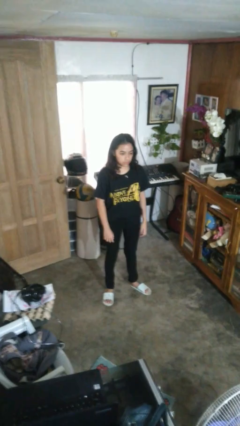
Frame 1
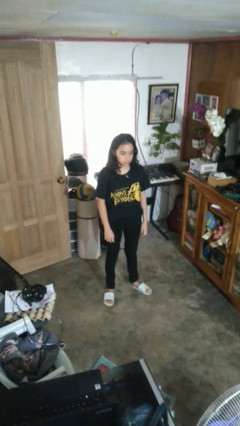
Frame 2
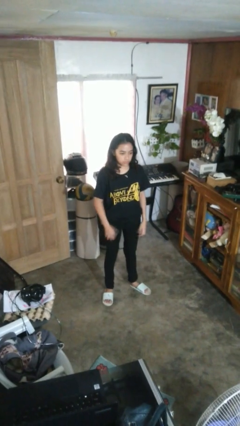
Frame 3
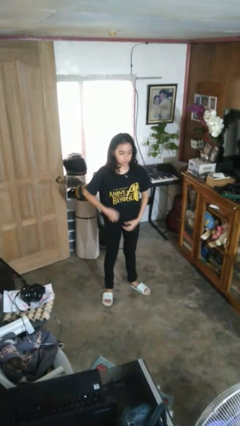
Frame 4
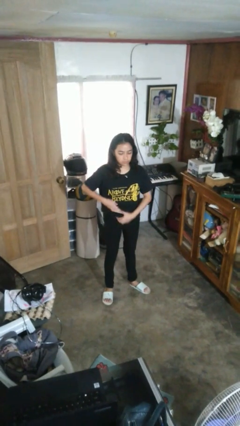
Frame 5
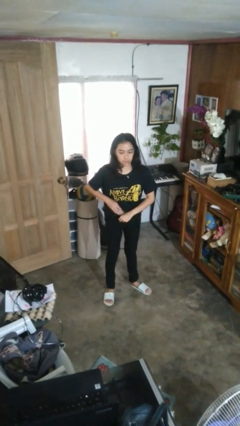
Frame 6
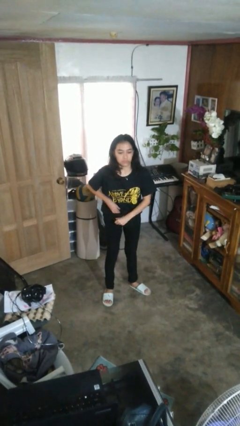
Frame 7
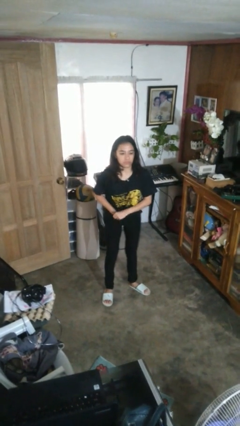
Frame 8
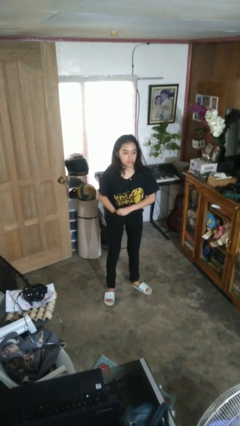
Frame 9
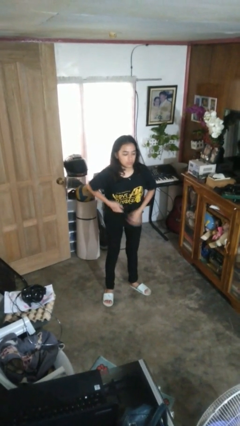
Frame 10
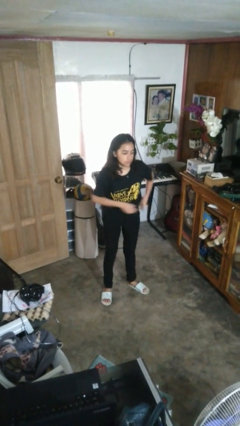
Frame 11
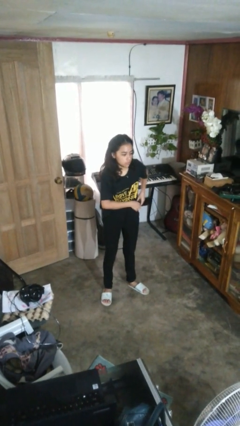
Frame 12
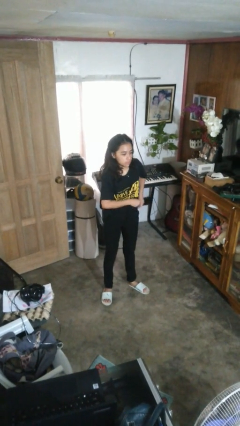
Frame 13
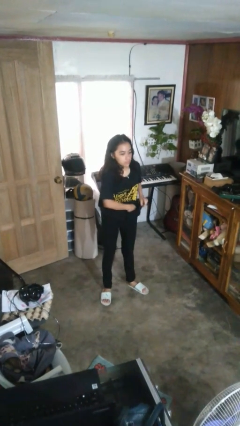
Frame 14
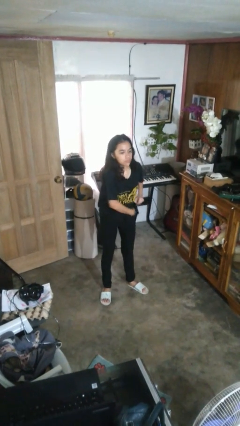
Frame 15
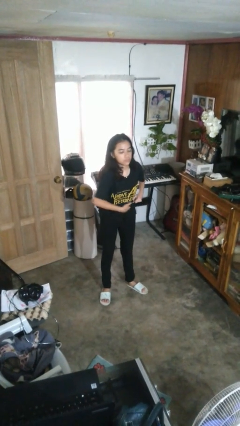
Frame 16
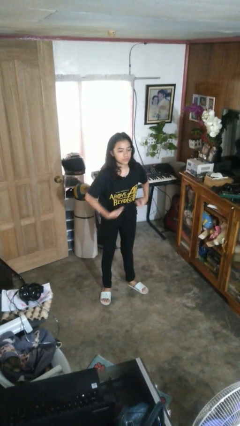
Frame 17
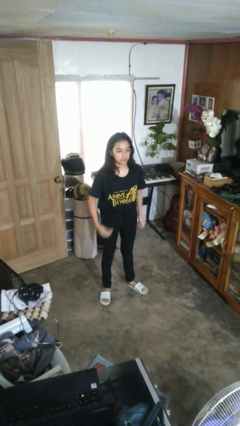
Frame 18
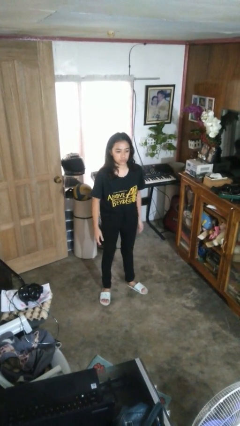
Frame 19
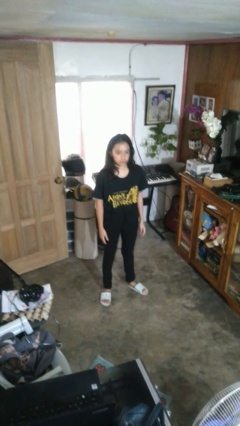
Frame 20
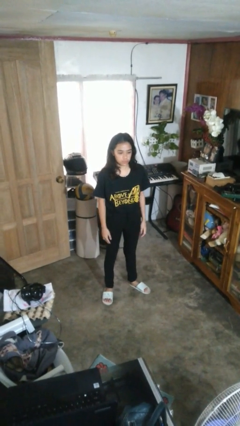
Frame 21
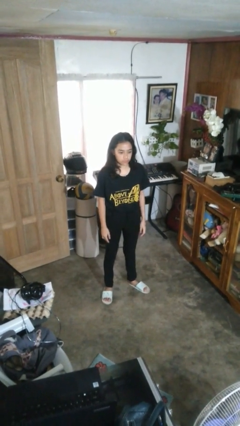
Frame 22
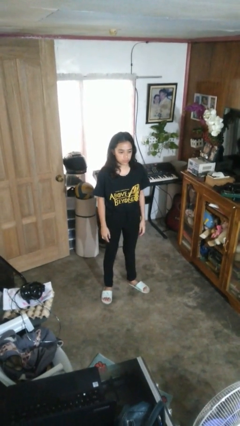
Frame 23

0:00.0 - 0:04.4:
person tucks in shirt

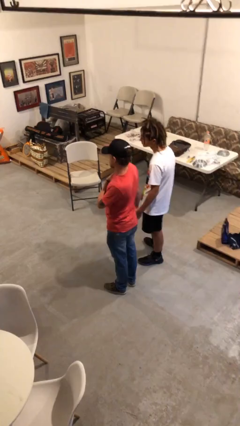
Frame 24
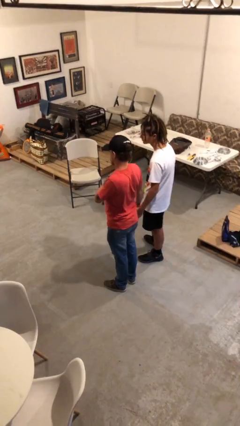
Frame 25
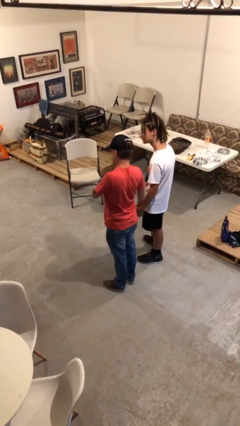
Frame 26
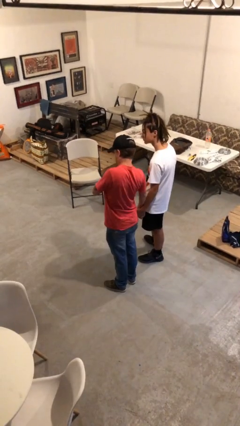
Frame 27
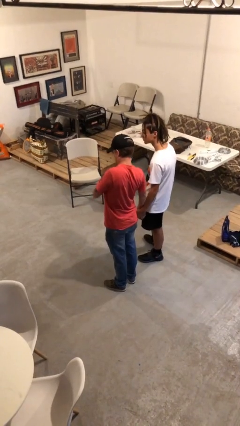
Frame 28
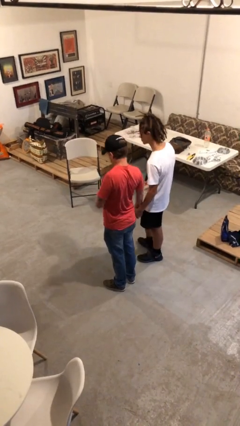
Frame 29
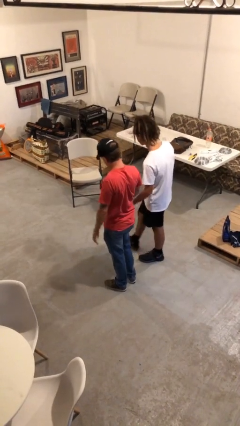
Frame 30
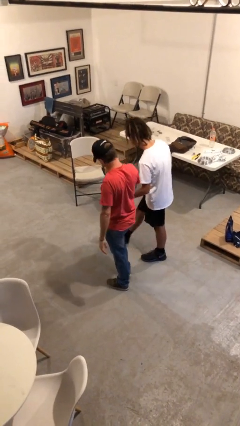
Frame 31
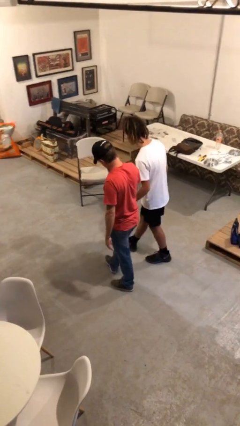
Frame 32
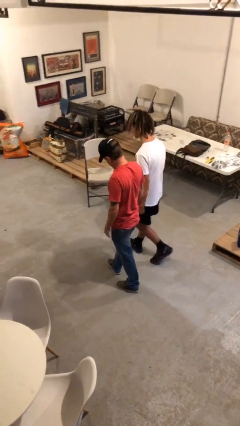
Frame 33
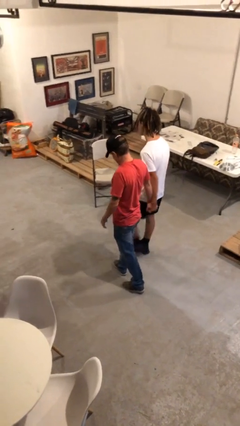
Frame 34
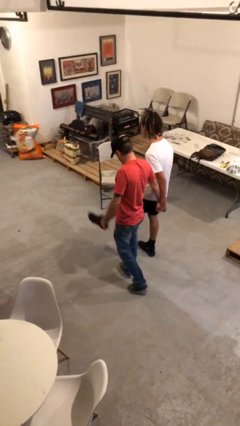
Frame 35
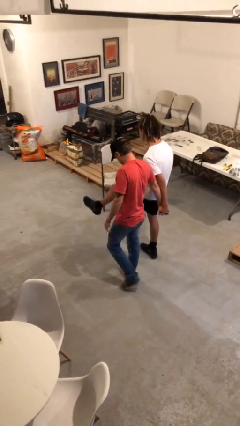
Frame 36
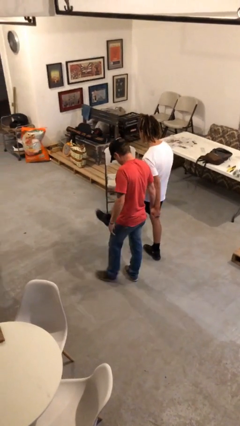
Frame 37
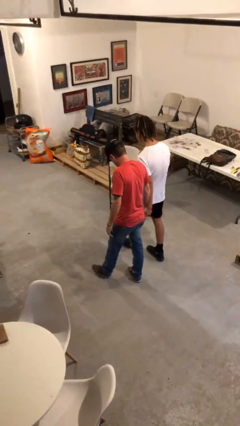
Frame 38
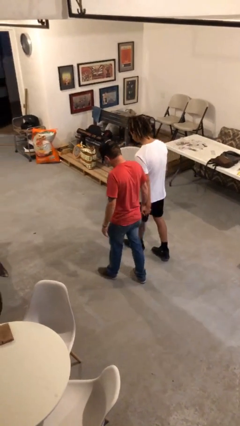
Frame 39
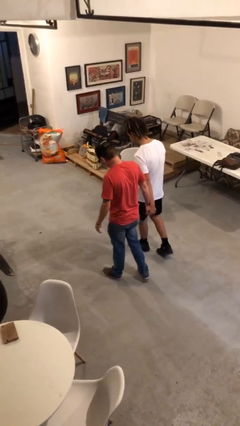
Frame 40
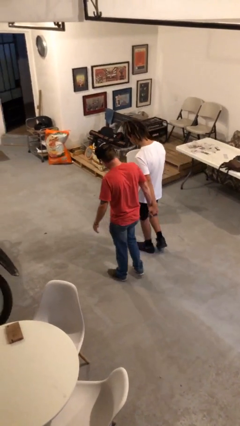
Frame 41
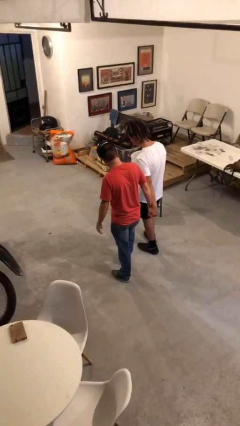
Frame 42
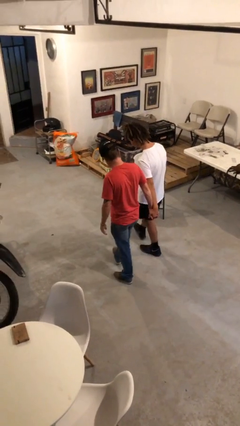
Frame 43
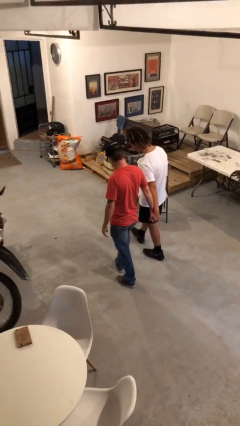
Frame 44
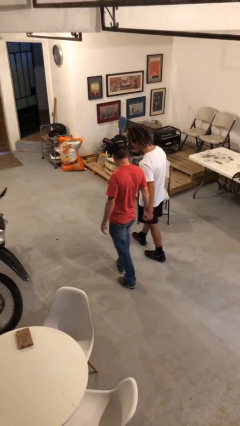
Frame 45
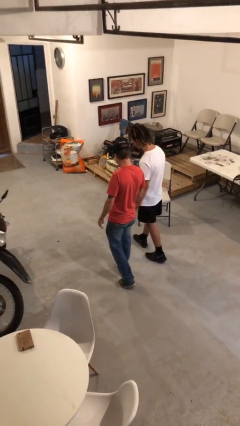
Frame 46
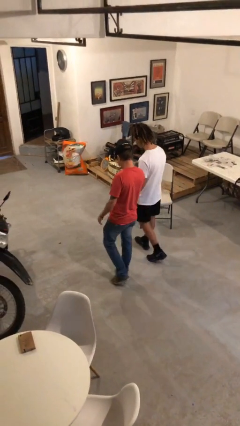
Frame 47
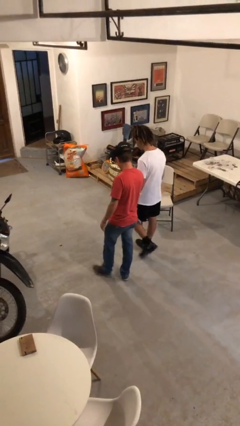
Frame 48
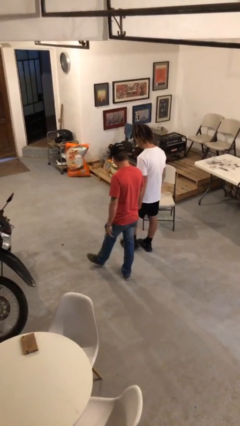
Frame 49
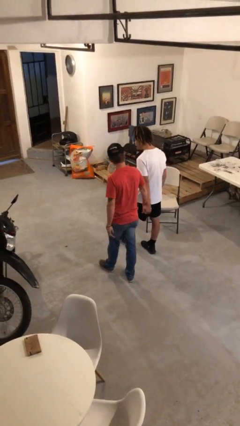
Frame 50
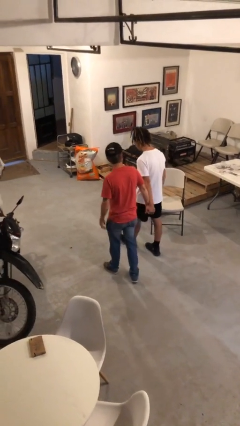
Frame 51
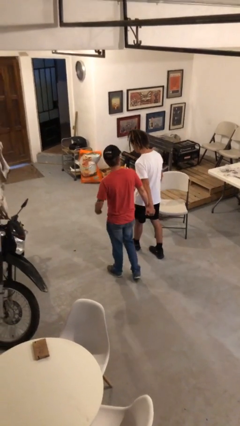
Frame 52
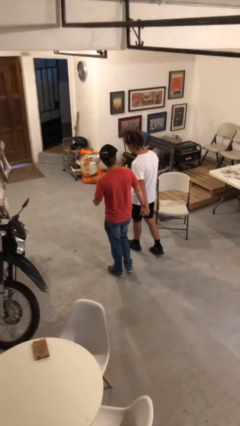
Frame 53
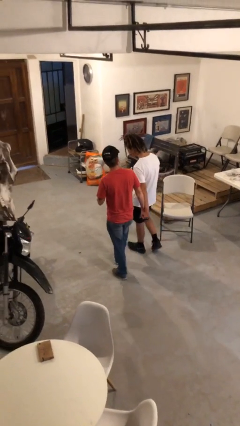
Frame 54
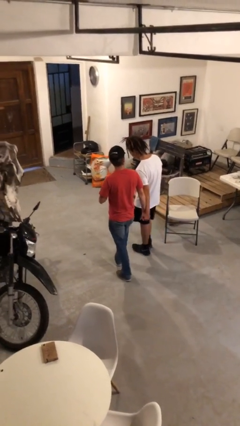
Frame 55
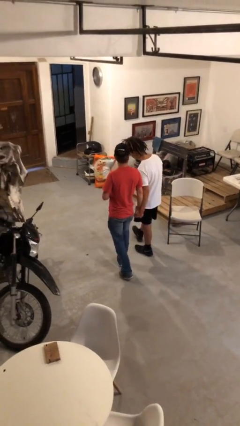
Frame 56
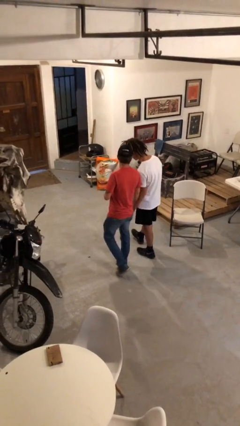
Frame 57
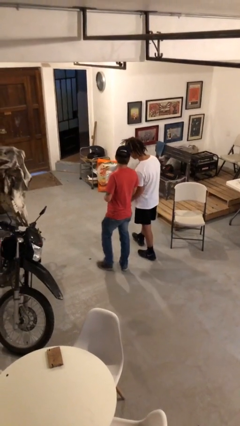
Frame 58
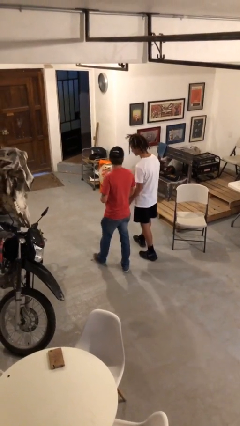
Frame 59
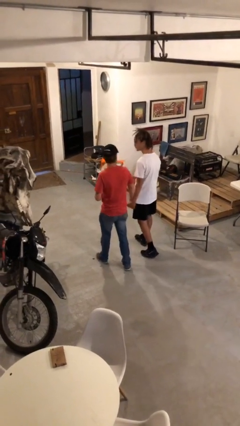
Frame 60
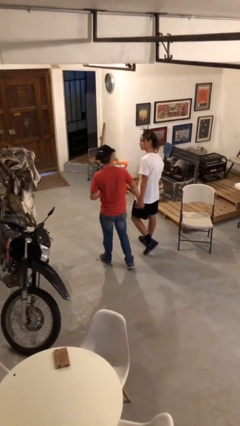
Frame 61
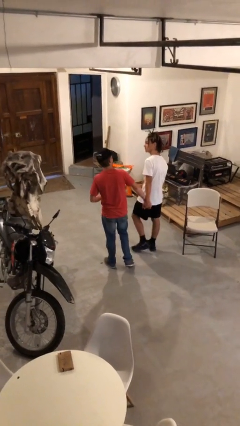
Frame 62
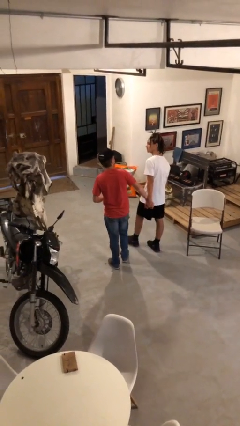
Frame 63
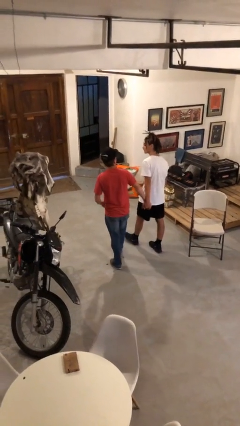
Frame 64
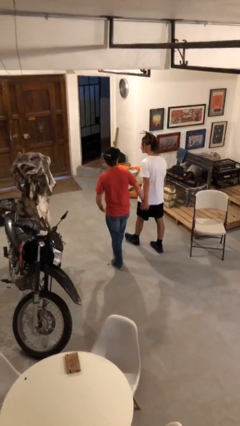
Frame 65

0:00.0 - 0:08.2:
person holds hand

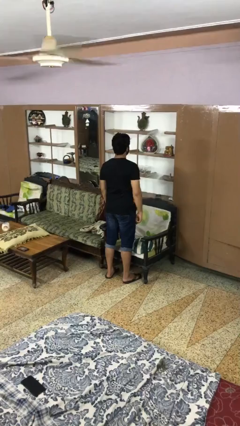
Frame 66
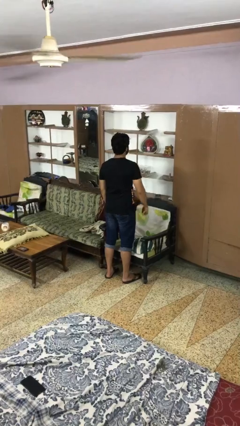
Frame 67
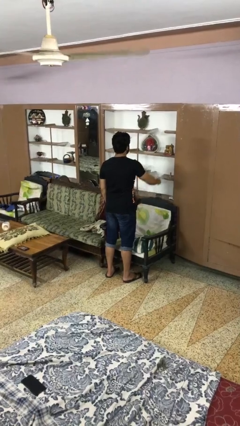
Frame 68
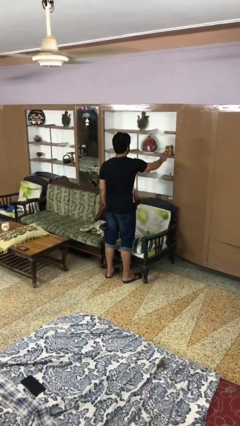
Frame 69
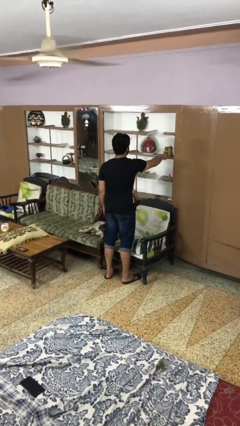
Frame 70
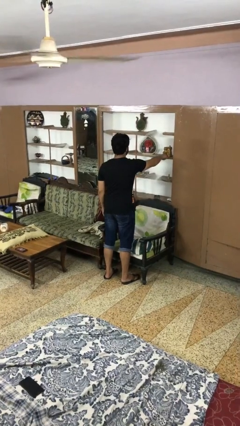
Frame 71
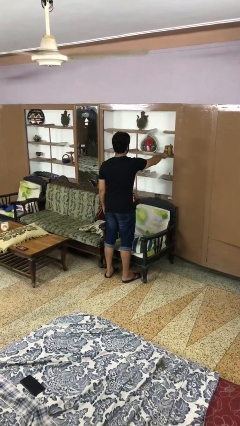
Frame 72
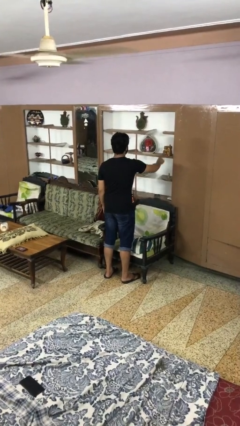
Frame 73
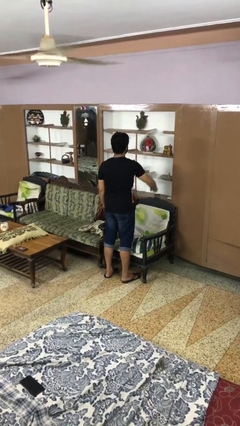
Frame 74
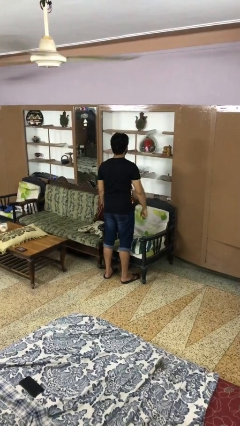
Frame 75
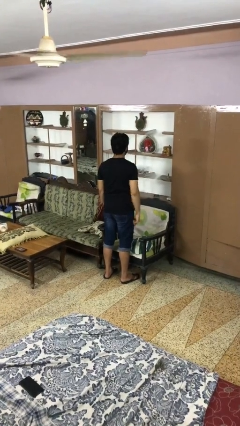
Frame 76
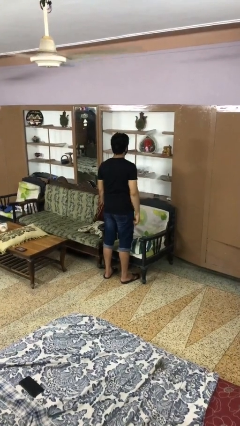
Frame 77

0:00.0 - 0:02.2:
person taps object with finger

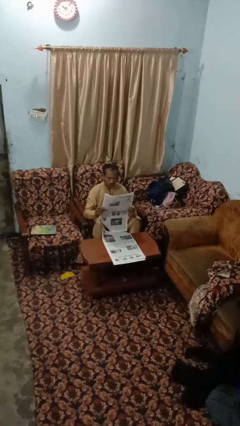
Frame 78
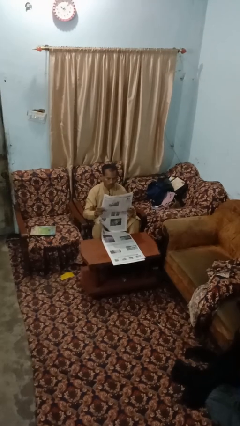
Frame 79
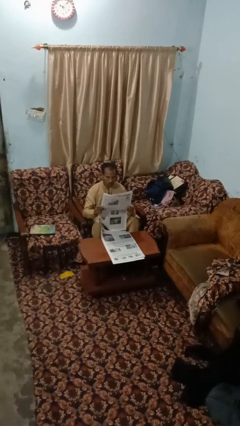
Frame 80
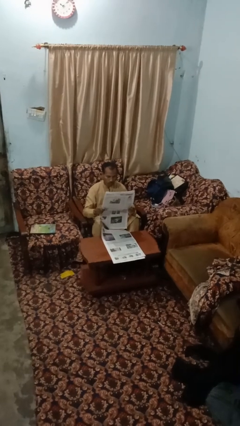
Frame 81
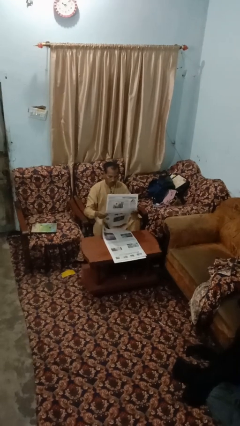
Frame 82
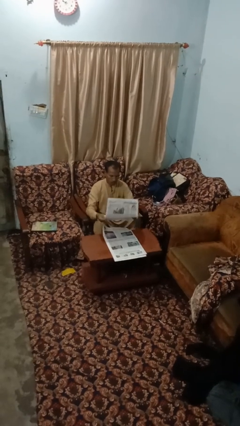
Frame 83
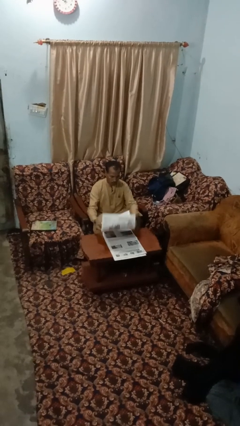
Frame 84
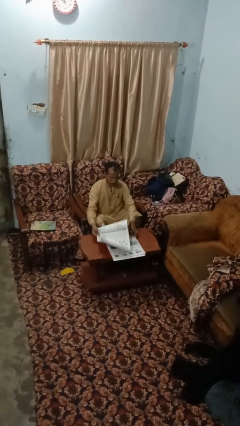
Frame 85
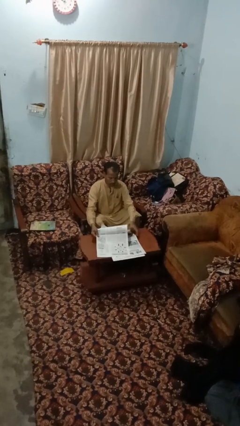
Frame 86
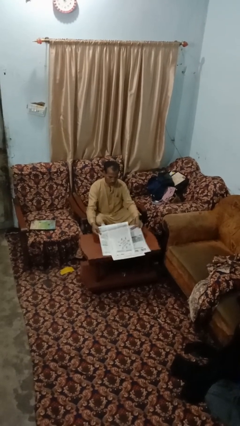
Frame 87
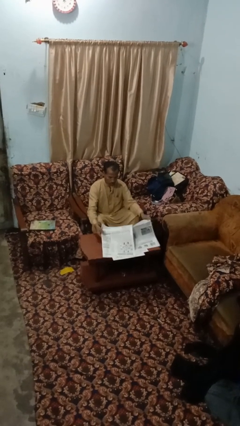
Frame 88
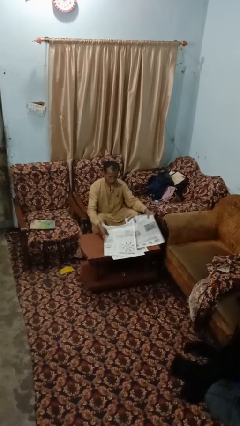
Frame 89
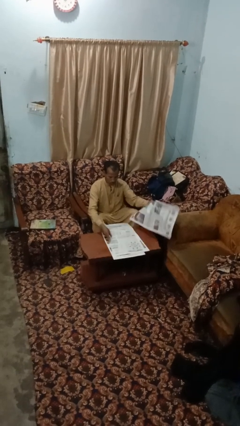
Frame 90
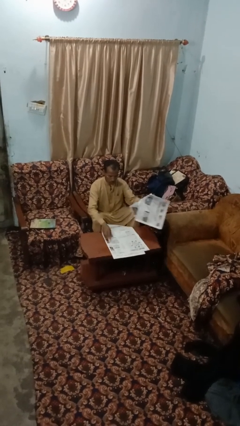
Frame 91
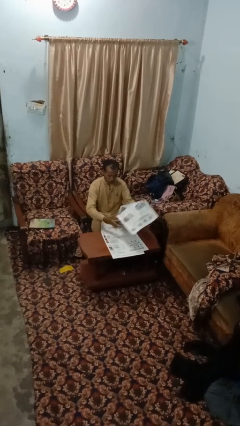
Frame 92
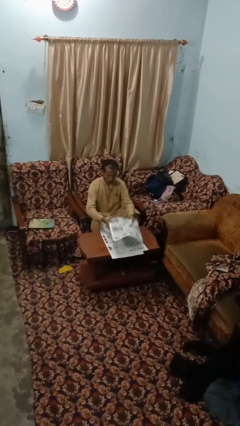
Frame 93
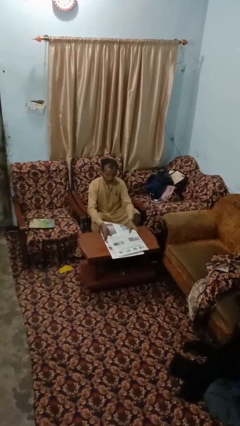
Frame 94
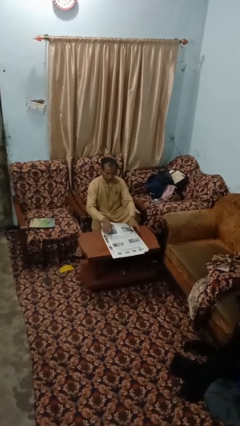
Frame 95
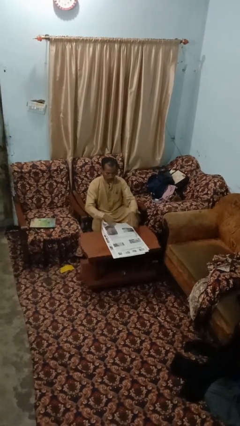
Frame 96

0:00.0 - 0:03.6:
person reads newspaper
